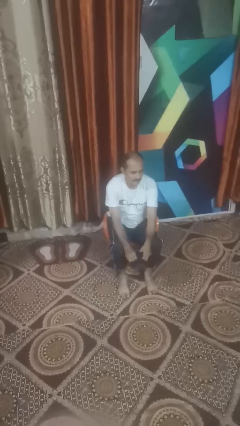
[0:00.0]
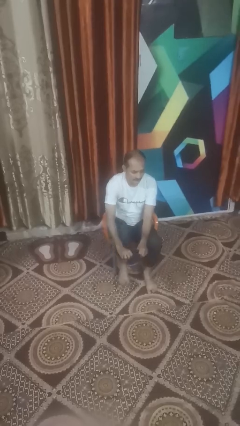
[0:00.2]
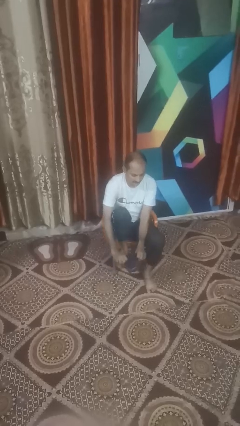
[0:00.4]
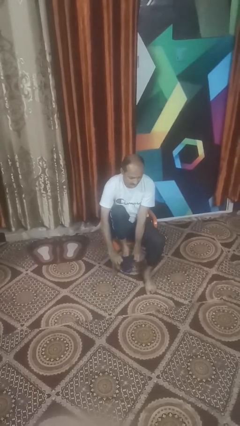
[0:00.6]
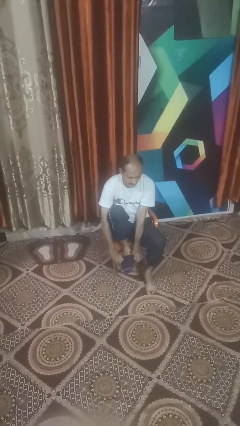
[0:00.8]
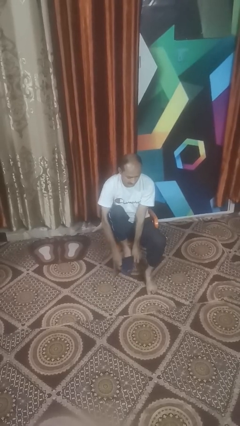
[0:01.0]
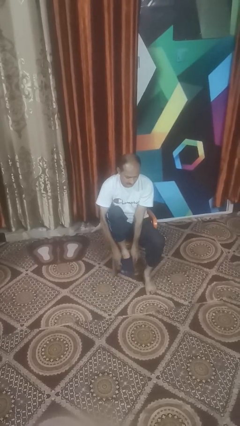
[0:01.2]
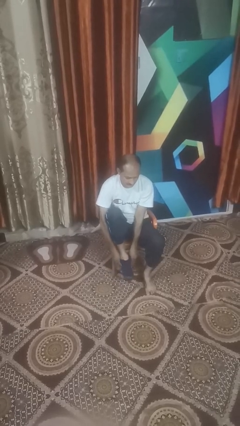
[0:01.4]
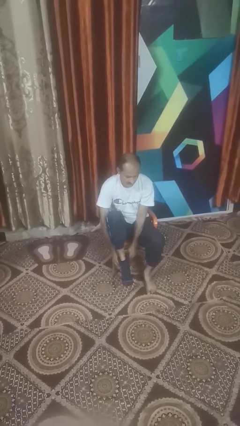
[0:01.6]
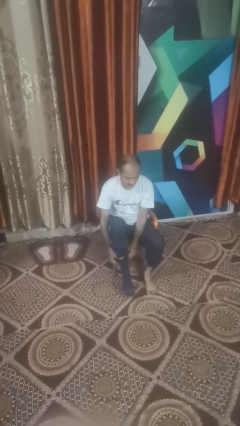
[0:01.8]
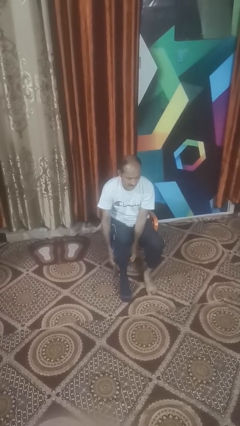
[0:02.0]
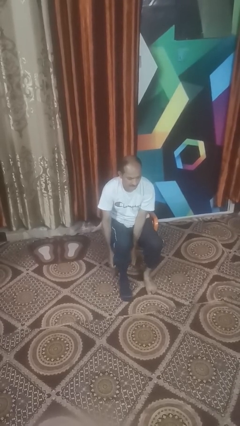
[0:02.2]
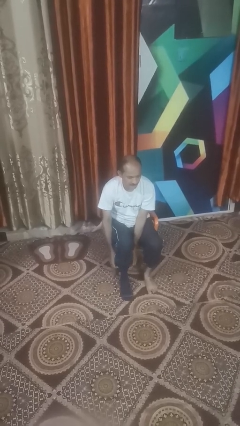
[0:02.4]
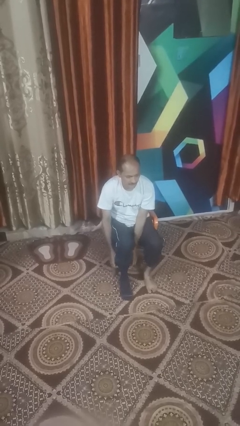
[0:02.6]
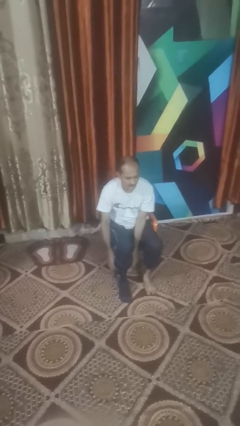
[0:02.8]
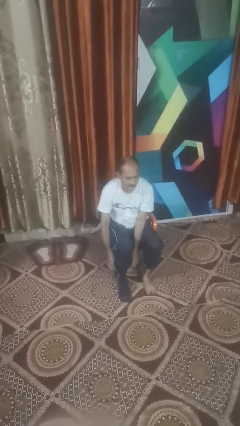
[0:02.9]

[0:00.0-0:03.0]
person puts on socks

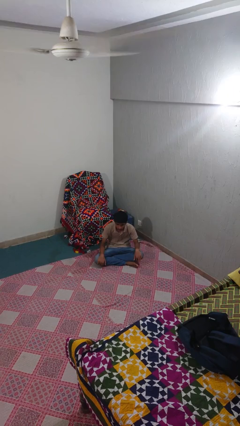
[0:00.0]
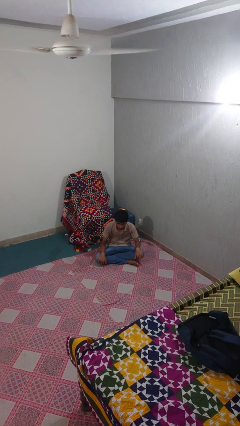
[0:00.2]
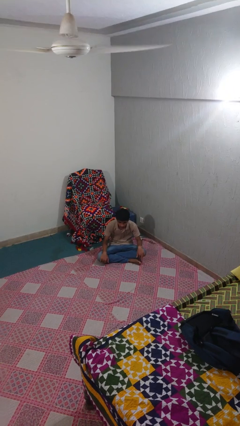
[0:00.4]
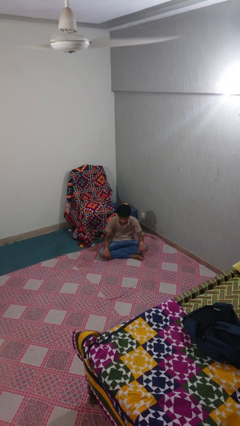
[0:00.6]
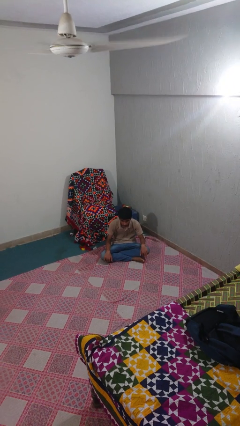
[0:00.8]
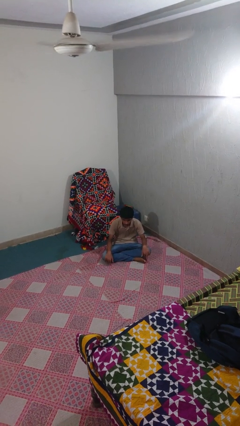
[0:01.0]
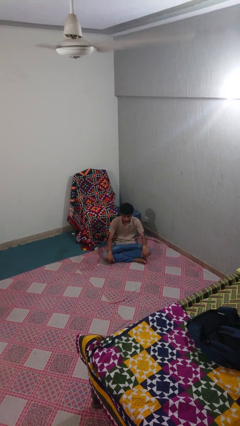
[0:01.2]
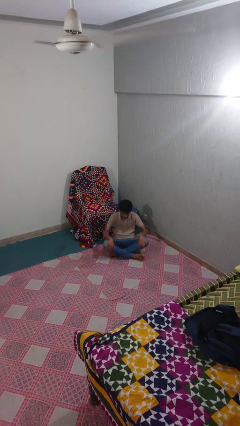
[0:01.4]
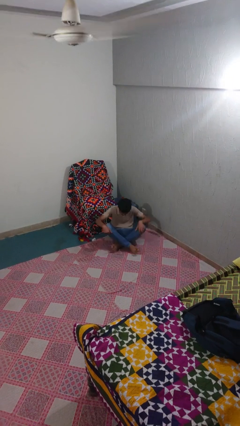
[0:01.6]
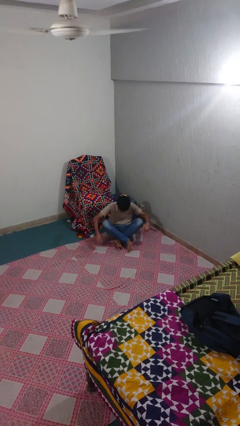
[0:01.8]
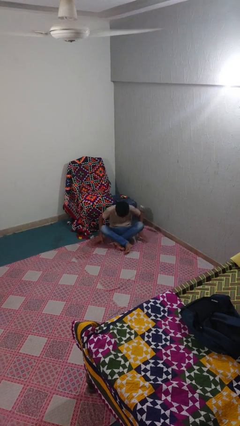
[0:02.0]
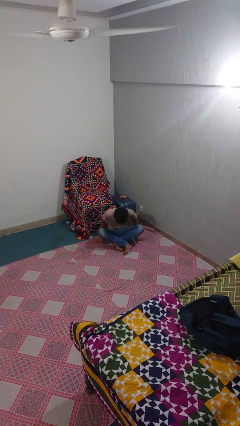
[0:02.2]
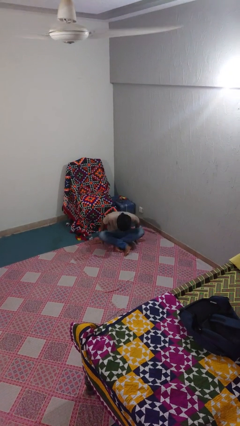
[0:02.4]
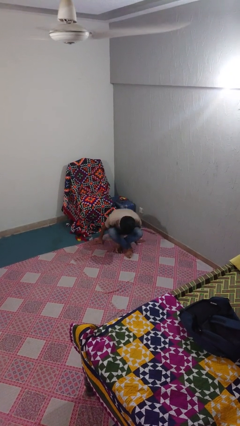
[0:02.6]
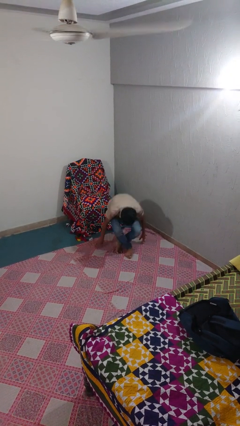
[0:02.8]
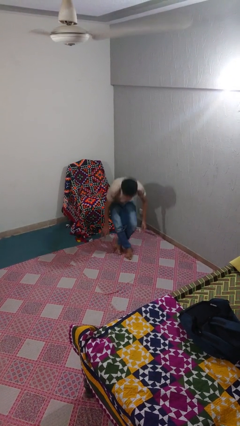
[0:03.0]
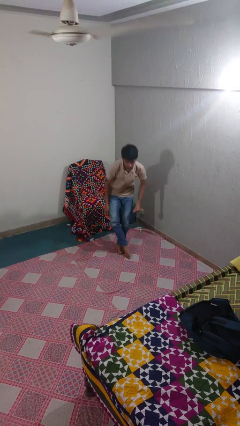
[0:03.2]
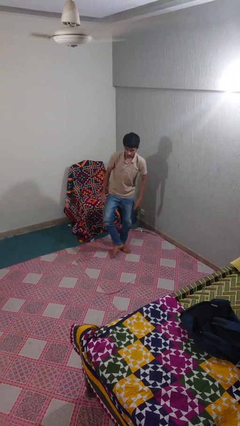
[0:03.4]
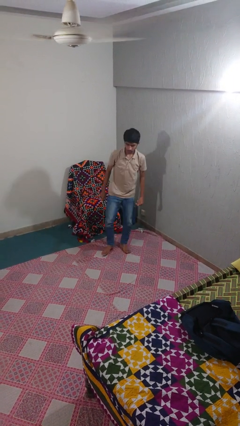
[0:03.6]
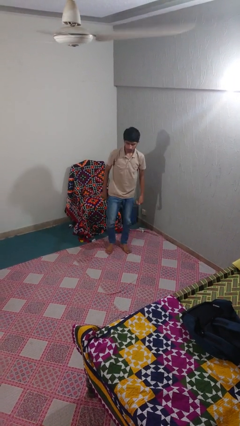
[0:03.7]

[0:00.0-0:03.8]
person stands up from floor

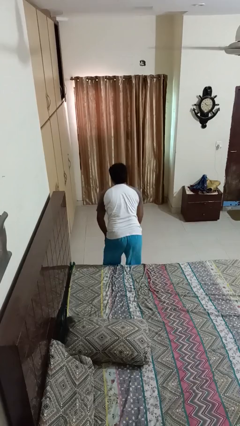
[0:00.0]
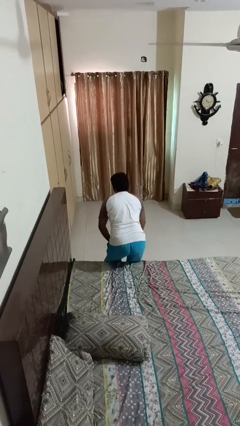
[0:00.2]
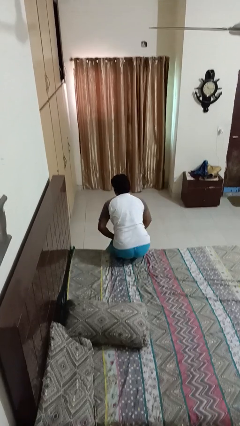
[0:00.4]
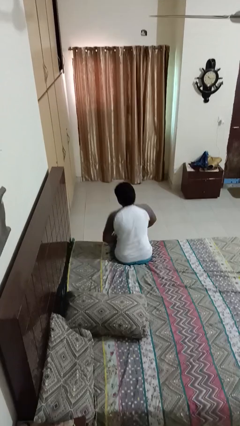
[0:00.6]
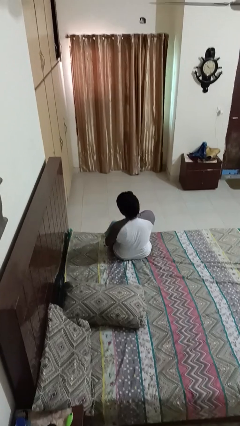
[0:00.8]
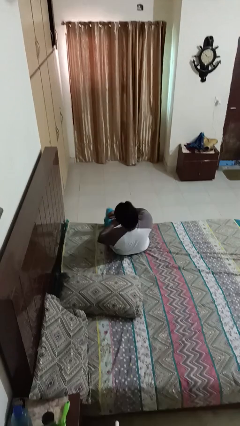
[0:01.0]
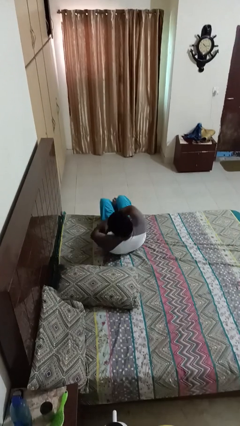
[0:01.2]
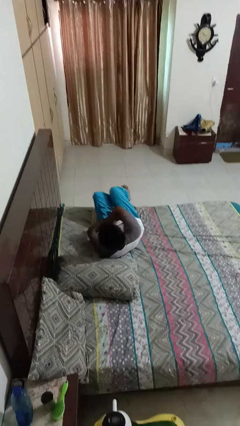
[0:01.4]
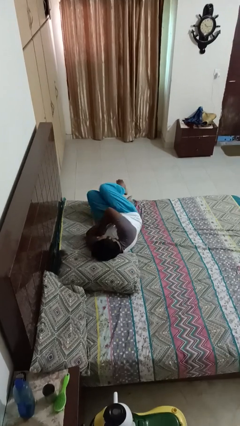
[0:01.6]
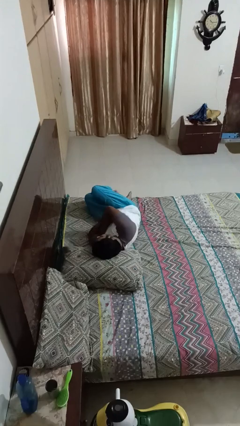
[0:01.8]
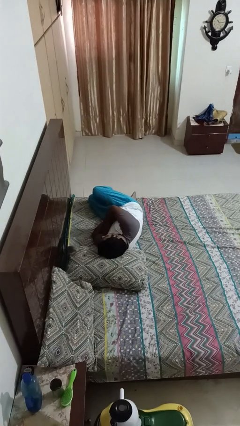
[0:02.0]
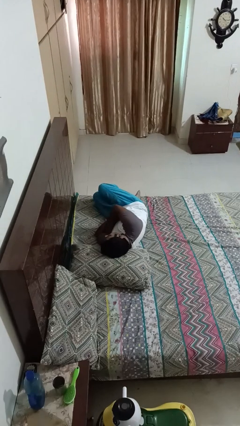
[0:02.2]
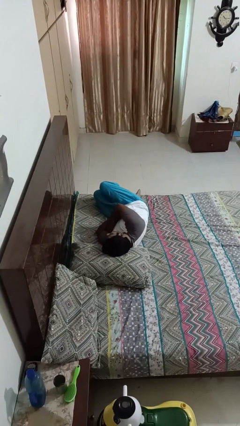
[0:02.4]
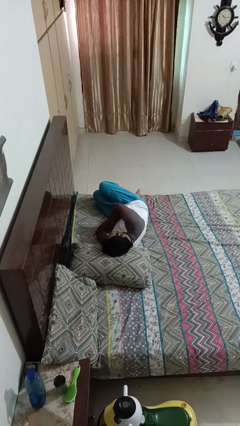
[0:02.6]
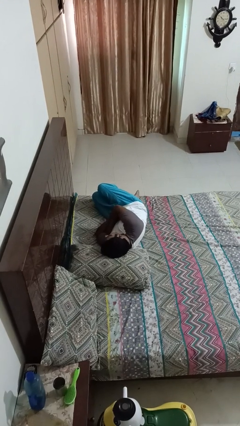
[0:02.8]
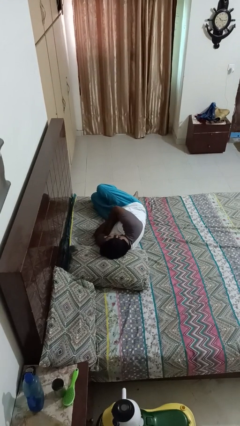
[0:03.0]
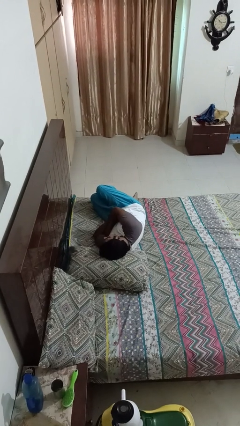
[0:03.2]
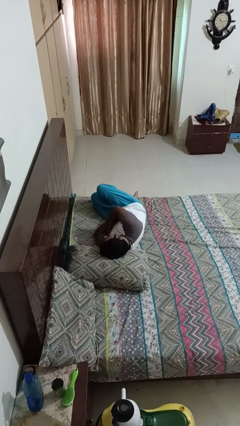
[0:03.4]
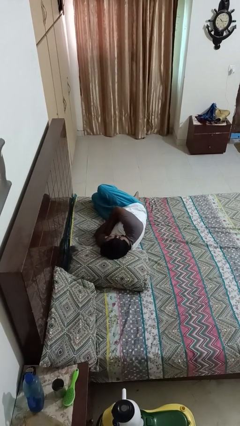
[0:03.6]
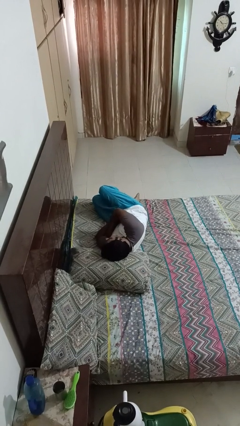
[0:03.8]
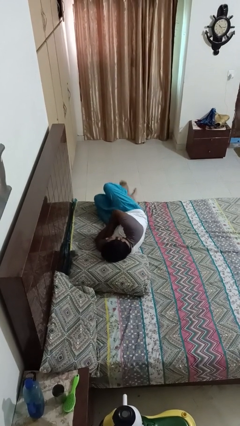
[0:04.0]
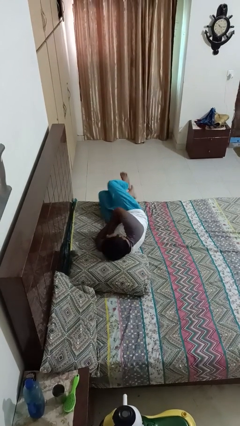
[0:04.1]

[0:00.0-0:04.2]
person lies down on bed

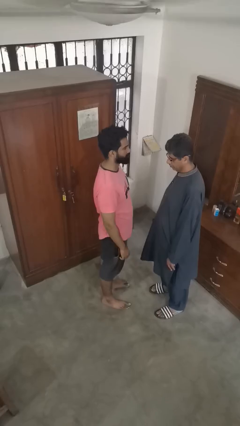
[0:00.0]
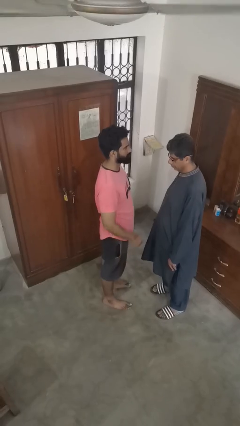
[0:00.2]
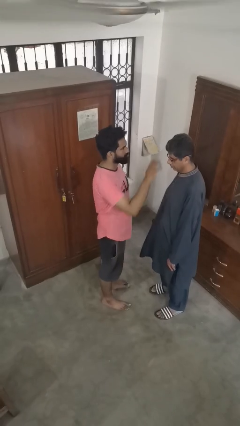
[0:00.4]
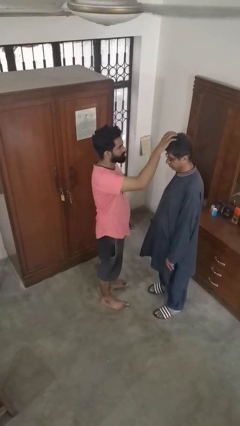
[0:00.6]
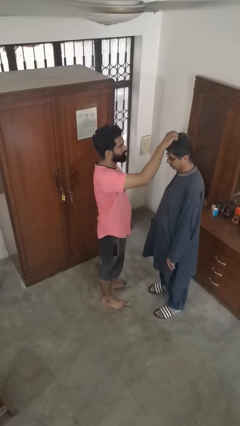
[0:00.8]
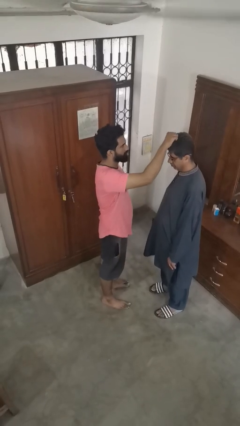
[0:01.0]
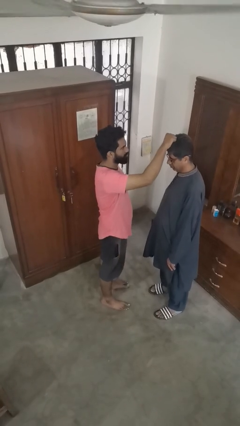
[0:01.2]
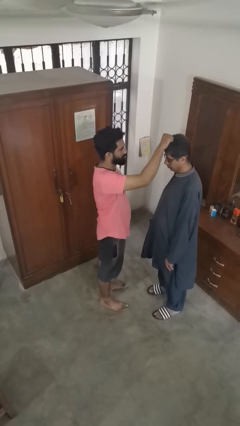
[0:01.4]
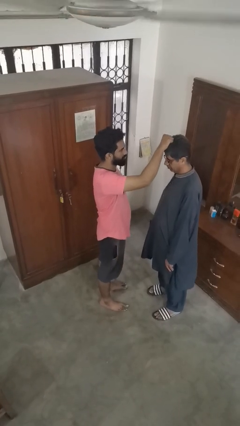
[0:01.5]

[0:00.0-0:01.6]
person grabs person by hair

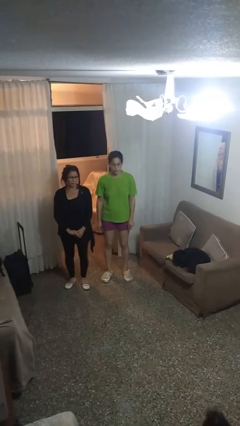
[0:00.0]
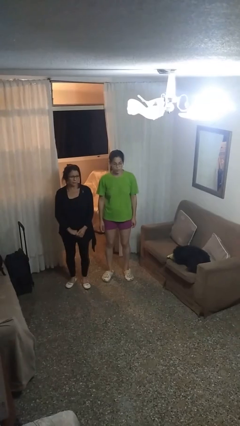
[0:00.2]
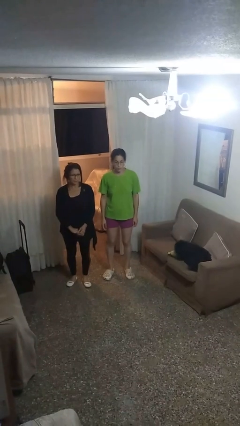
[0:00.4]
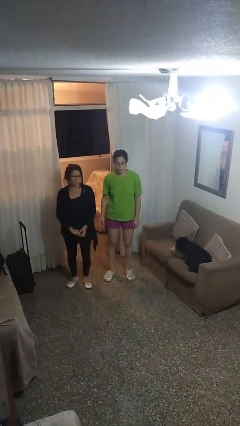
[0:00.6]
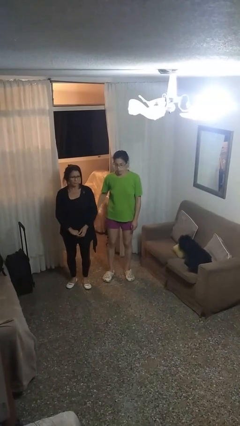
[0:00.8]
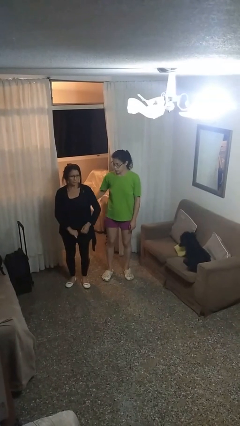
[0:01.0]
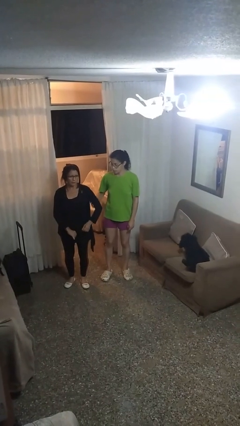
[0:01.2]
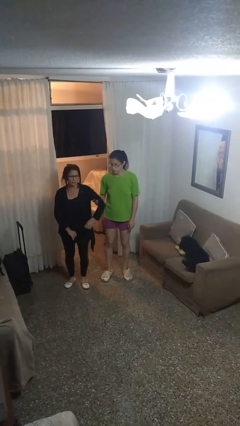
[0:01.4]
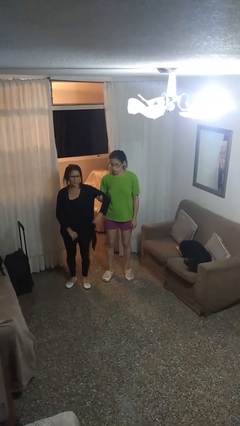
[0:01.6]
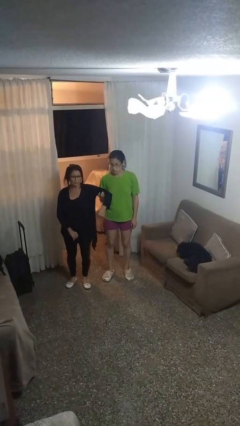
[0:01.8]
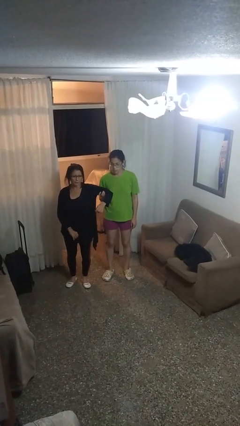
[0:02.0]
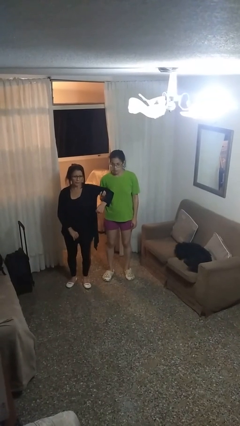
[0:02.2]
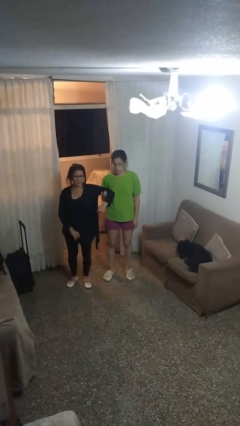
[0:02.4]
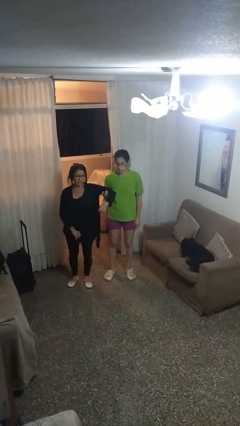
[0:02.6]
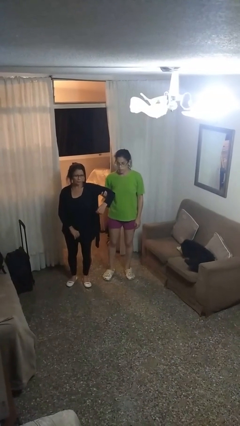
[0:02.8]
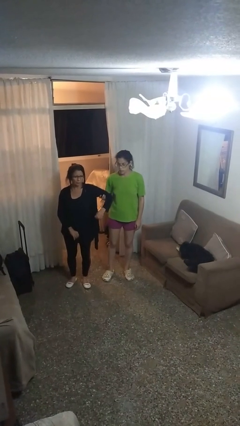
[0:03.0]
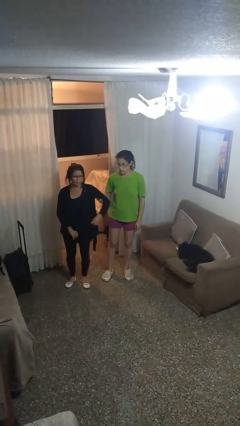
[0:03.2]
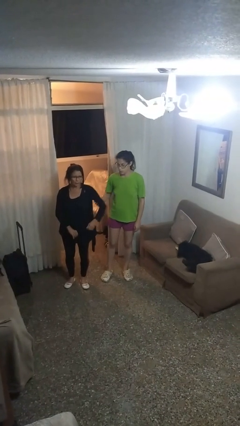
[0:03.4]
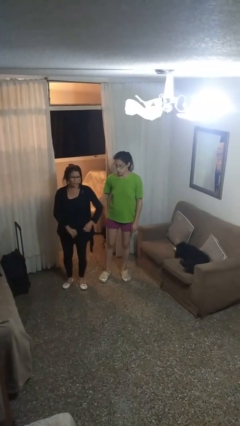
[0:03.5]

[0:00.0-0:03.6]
person grabs person by bicep

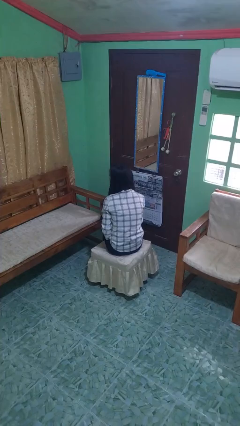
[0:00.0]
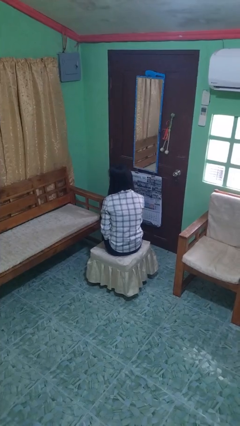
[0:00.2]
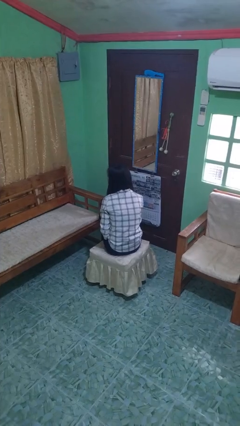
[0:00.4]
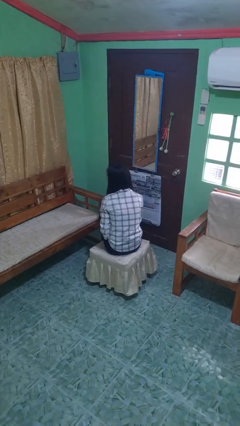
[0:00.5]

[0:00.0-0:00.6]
person puts down object on couch

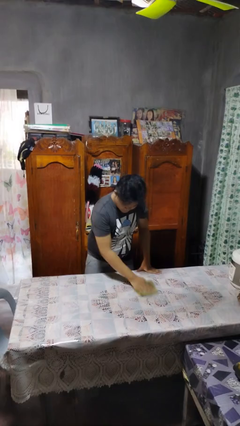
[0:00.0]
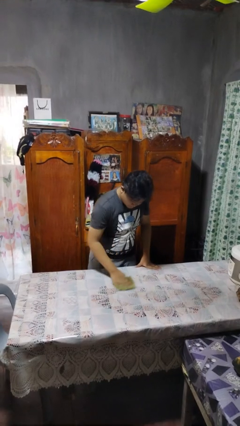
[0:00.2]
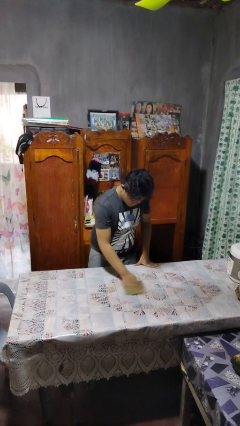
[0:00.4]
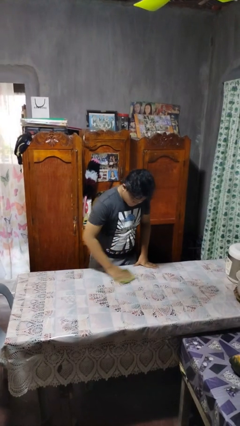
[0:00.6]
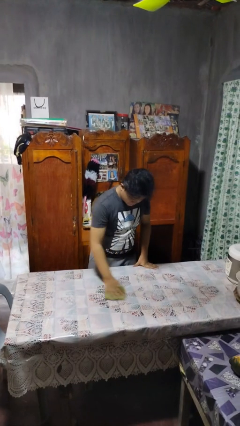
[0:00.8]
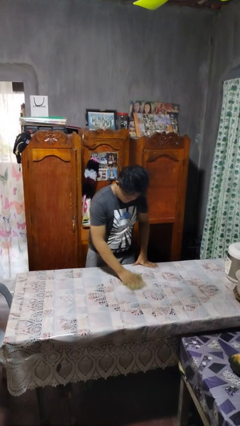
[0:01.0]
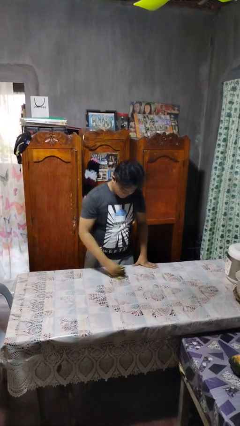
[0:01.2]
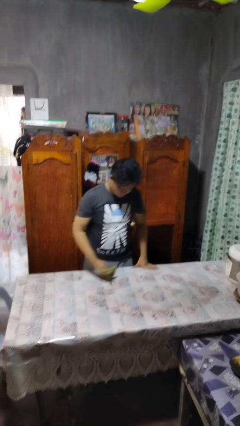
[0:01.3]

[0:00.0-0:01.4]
person cleans table with rag
